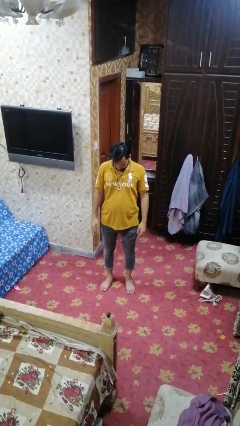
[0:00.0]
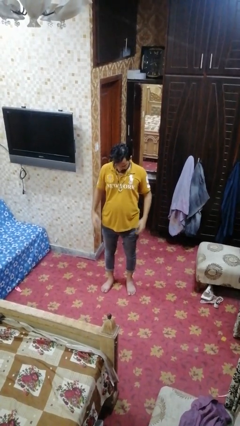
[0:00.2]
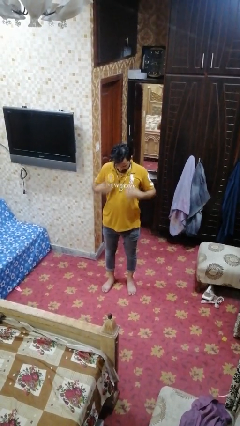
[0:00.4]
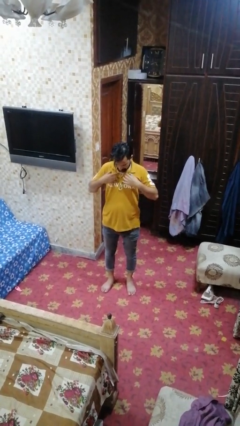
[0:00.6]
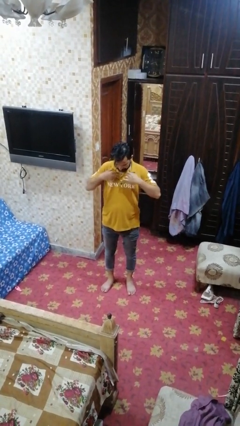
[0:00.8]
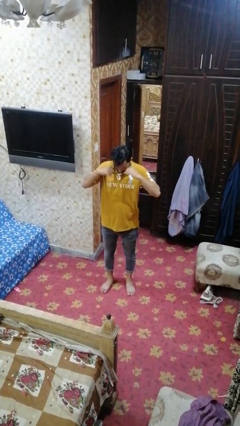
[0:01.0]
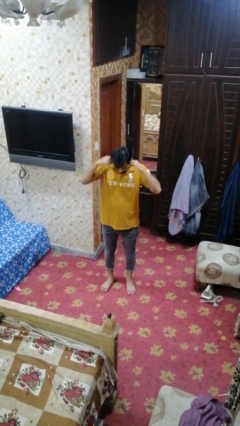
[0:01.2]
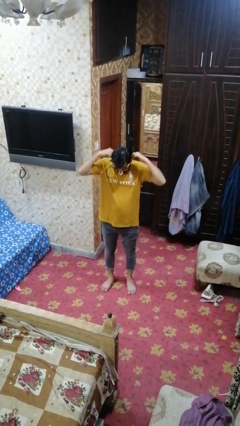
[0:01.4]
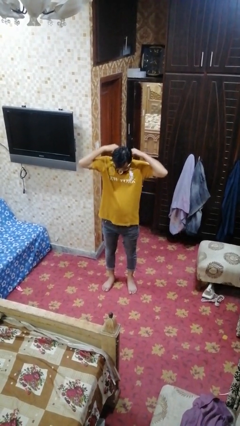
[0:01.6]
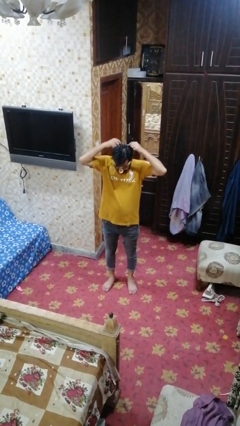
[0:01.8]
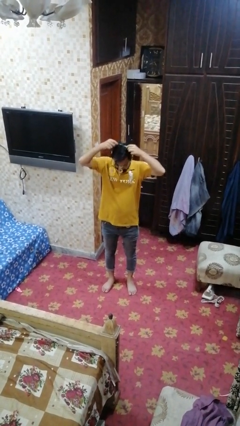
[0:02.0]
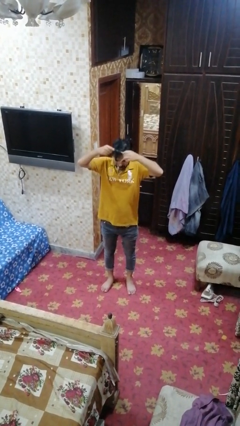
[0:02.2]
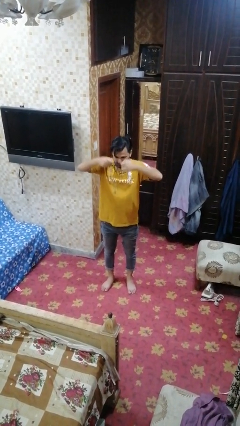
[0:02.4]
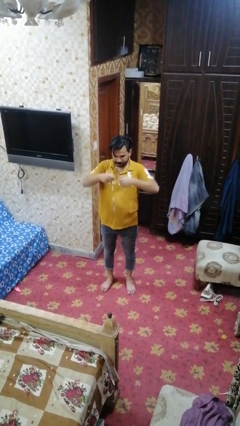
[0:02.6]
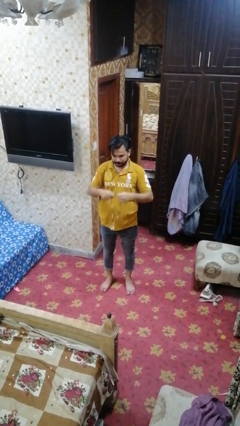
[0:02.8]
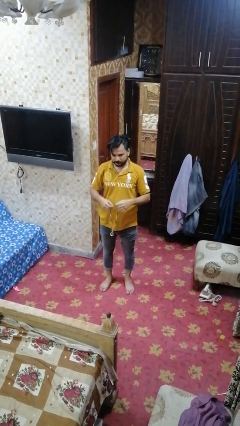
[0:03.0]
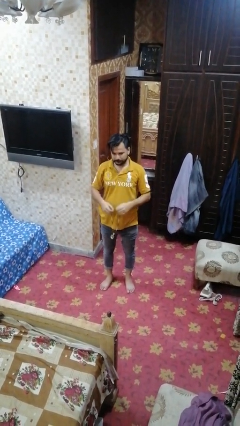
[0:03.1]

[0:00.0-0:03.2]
person takes off necklace

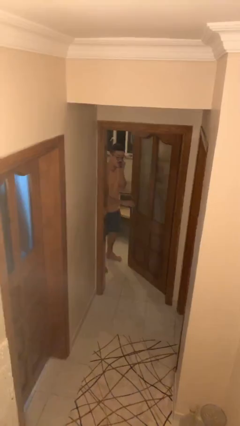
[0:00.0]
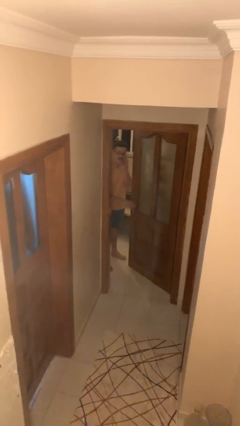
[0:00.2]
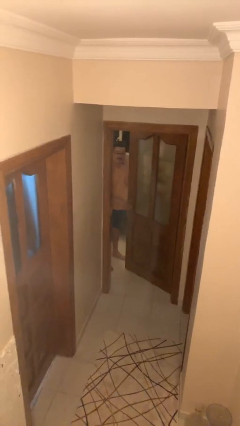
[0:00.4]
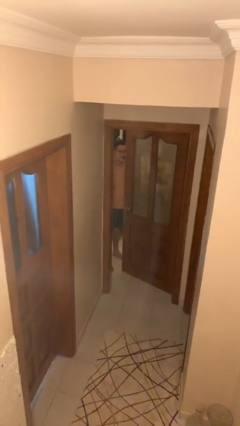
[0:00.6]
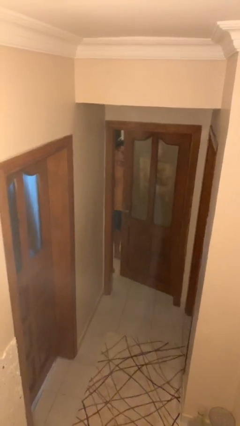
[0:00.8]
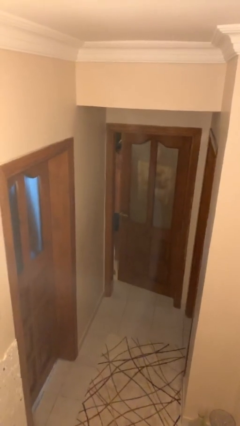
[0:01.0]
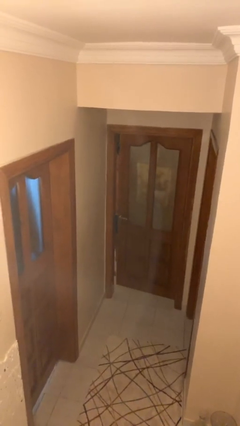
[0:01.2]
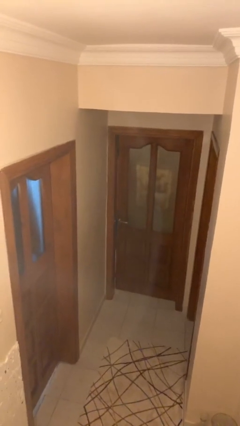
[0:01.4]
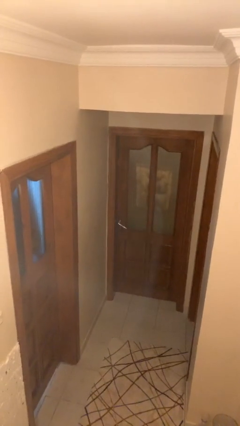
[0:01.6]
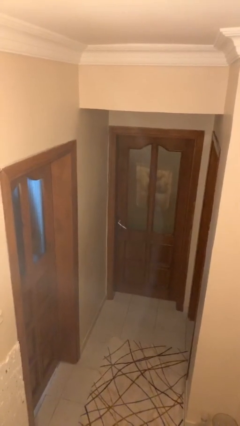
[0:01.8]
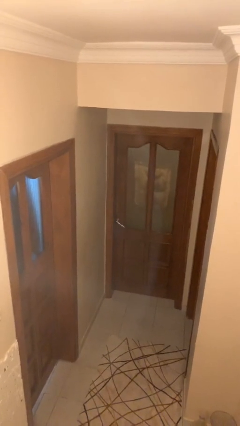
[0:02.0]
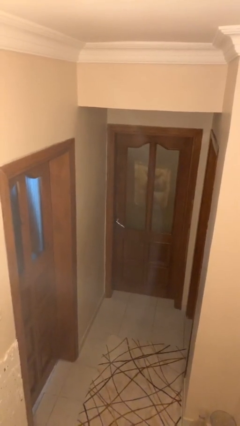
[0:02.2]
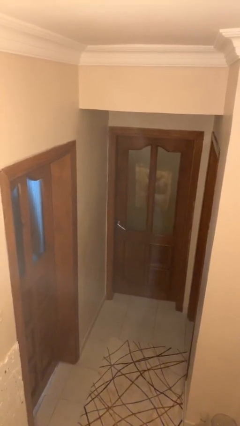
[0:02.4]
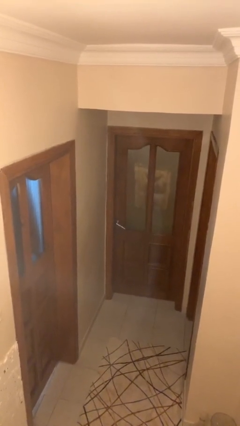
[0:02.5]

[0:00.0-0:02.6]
person closes facility door

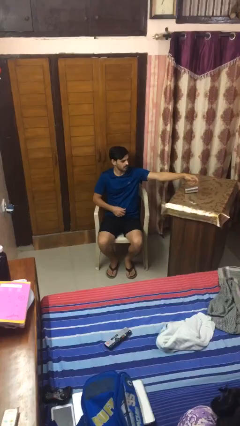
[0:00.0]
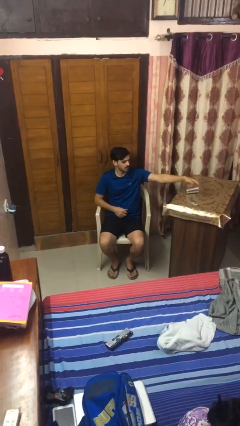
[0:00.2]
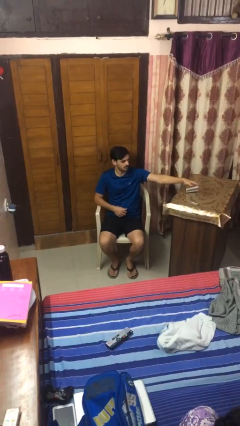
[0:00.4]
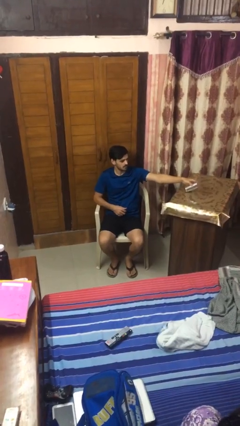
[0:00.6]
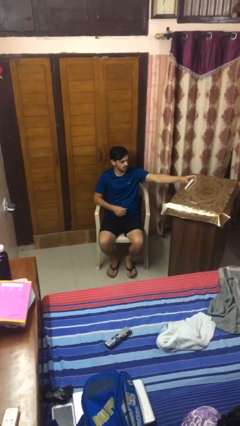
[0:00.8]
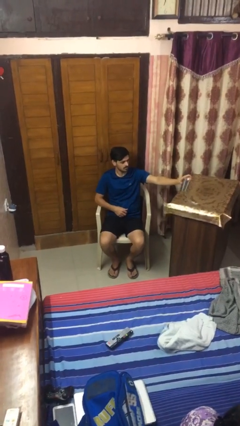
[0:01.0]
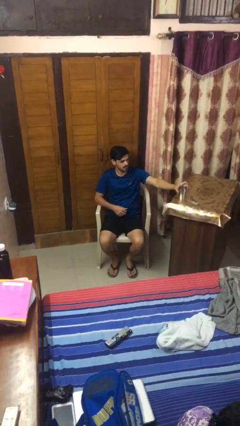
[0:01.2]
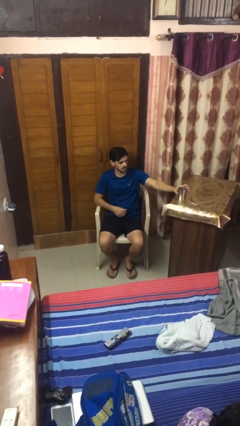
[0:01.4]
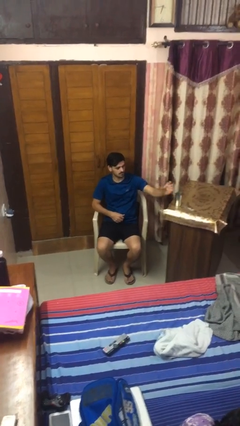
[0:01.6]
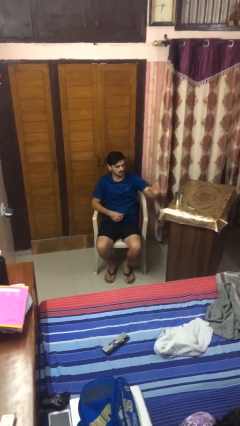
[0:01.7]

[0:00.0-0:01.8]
person sets upright glass

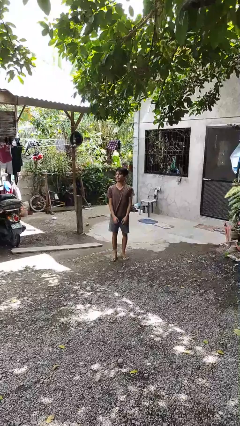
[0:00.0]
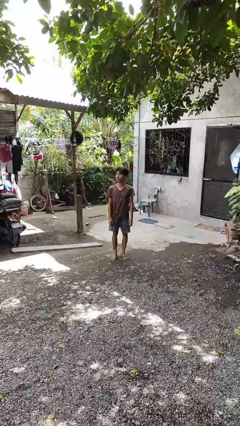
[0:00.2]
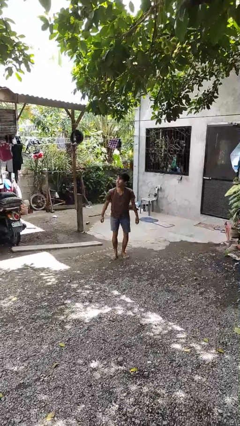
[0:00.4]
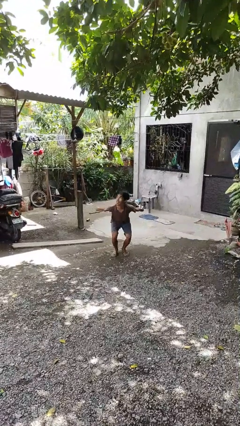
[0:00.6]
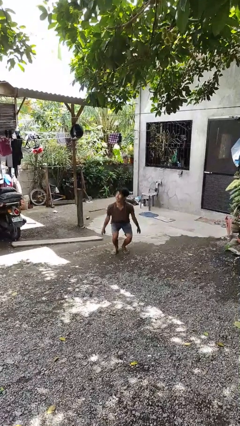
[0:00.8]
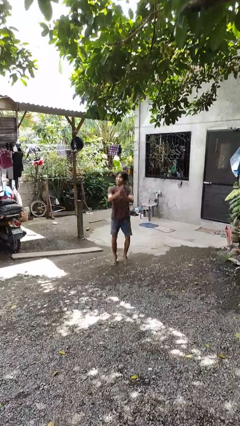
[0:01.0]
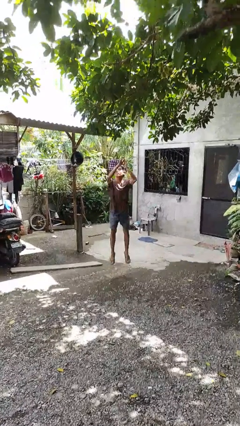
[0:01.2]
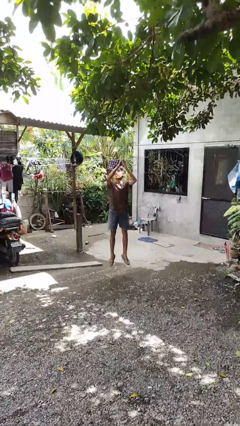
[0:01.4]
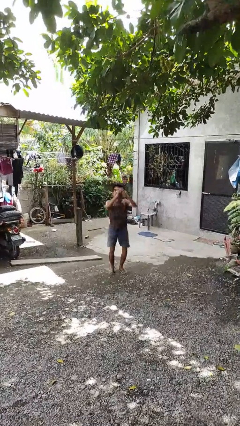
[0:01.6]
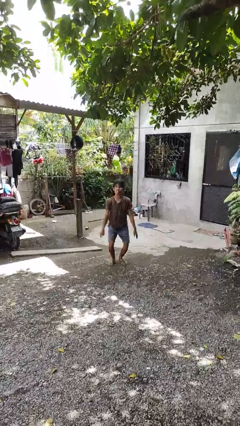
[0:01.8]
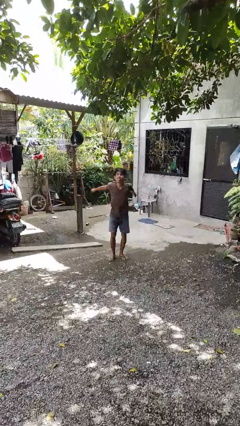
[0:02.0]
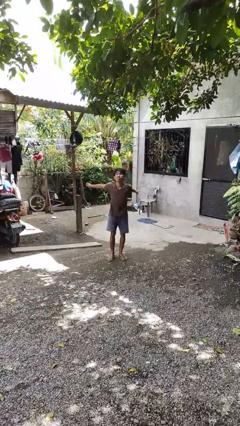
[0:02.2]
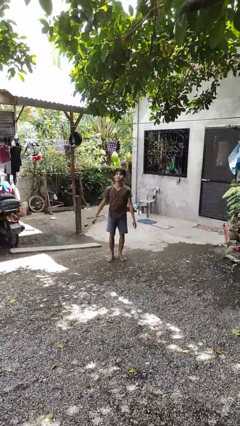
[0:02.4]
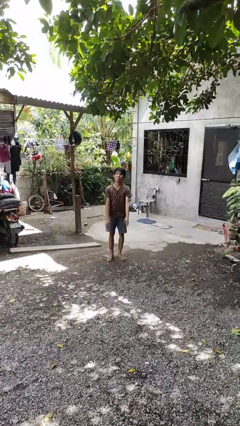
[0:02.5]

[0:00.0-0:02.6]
person jumps

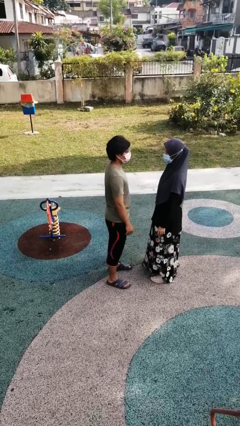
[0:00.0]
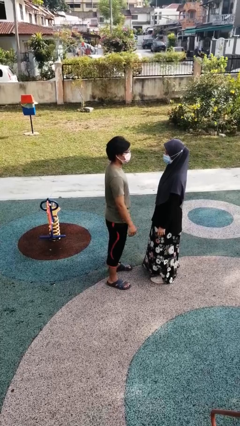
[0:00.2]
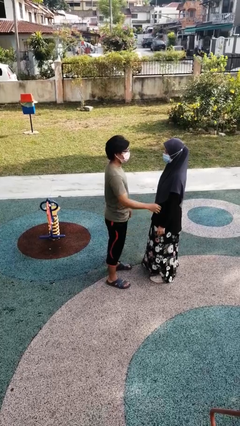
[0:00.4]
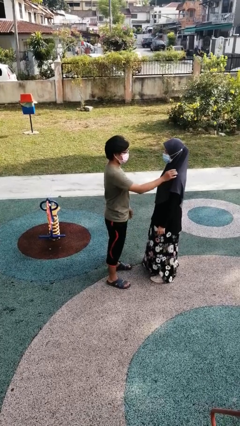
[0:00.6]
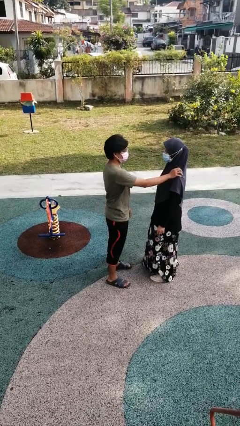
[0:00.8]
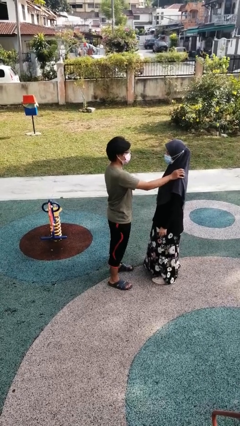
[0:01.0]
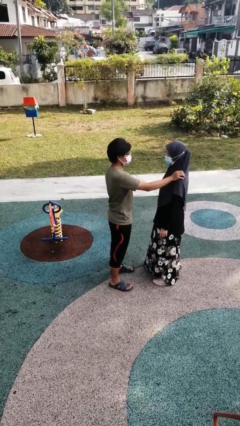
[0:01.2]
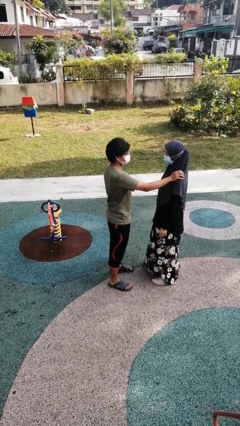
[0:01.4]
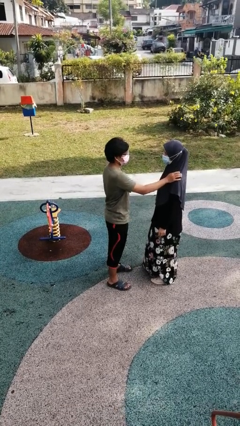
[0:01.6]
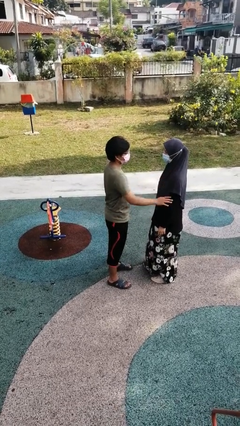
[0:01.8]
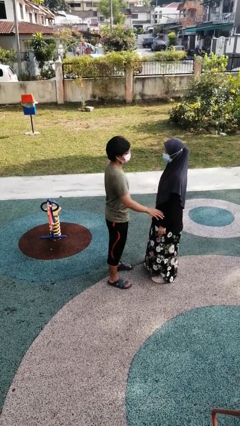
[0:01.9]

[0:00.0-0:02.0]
person pounds shoulders of person

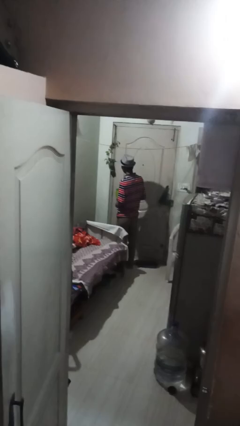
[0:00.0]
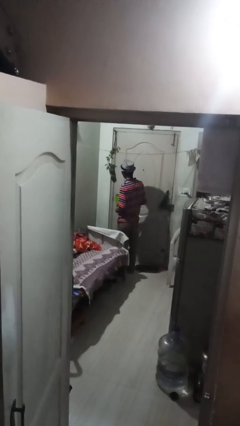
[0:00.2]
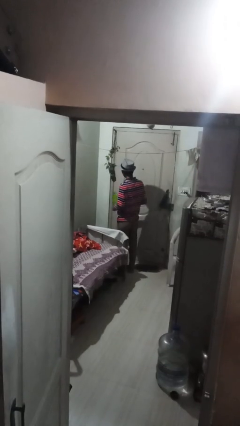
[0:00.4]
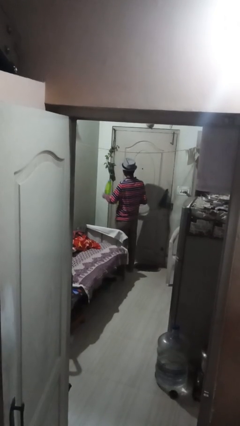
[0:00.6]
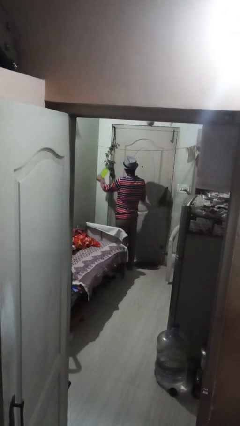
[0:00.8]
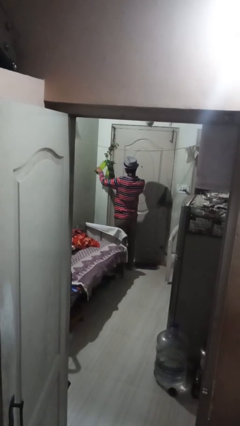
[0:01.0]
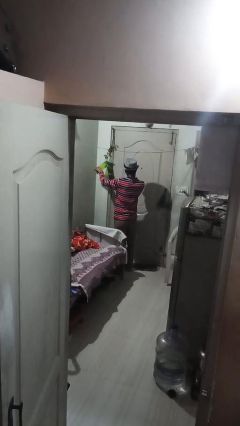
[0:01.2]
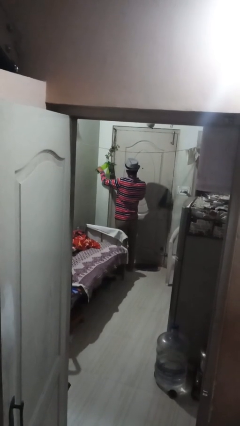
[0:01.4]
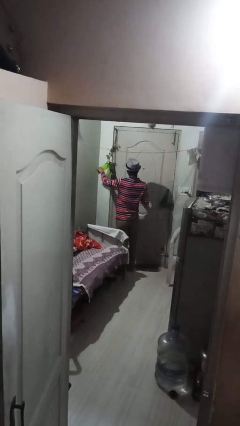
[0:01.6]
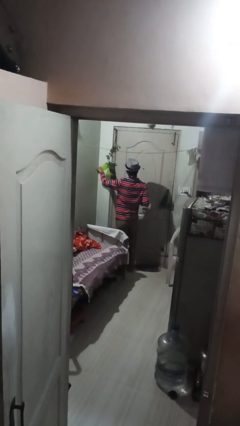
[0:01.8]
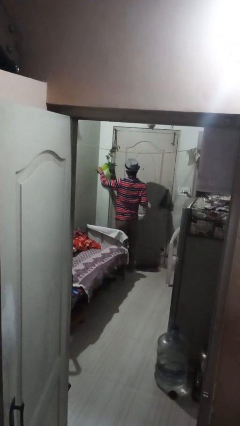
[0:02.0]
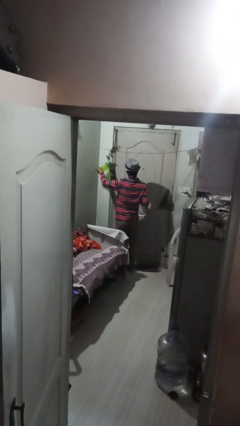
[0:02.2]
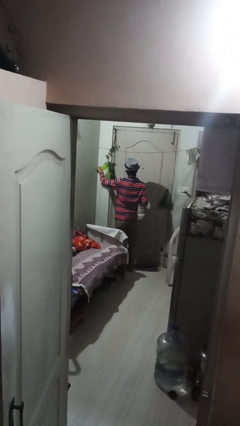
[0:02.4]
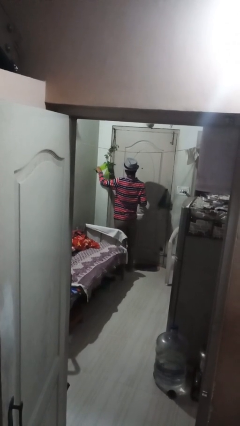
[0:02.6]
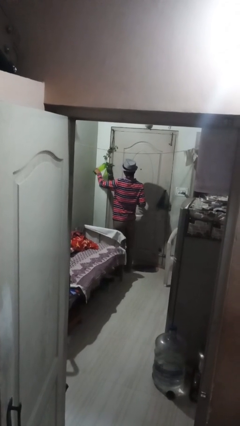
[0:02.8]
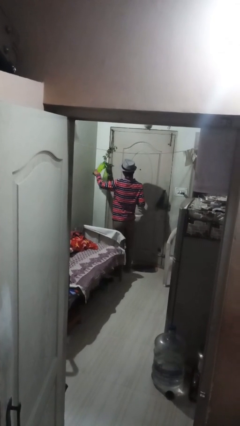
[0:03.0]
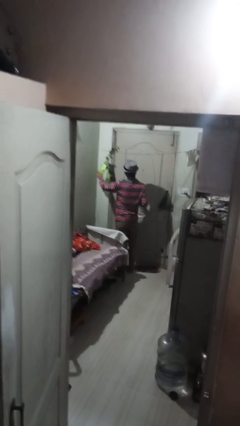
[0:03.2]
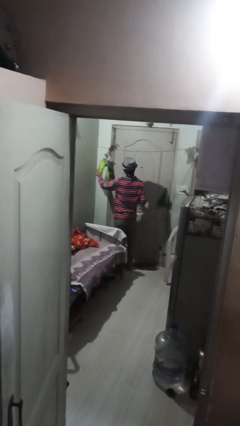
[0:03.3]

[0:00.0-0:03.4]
person waters houseplant

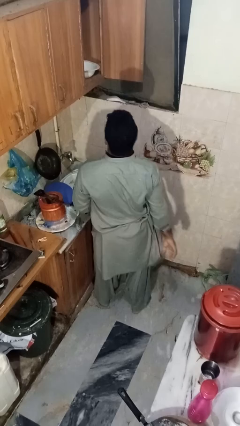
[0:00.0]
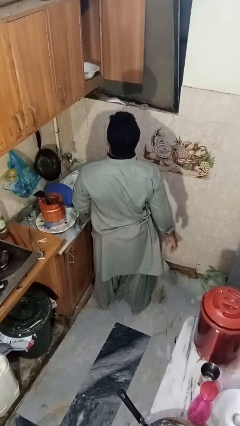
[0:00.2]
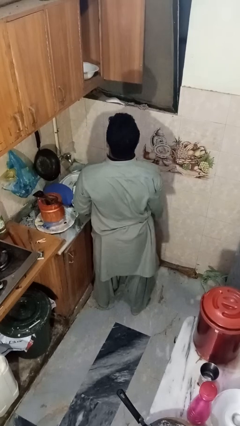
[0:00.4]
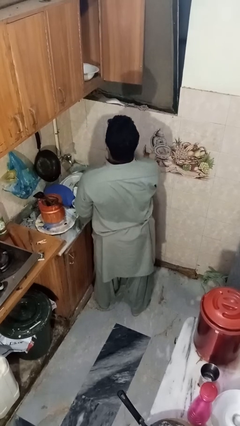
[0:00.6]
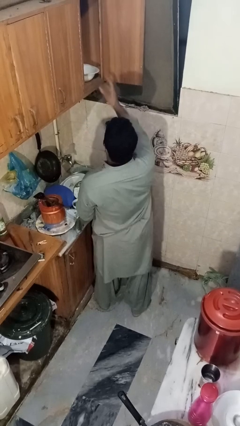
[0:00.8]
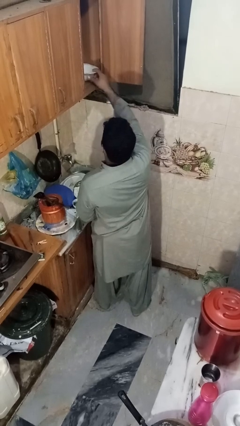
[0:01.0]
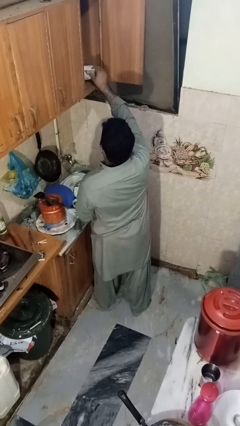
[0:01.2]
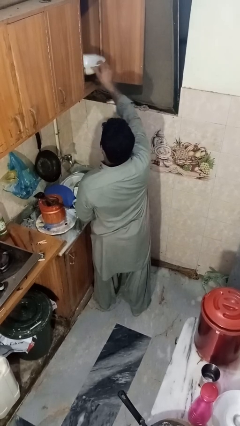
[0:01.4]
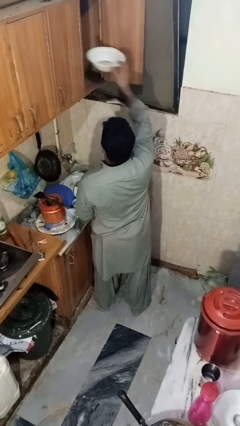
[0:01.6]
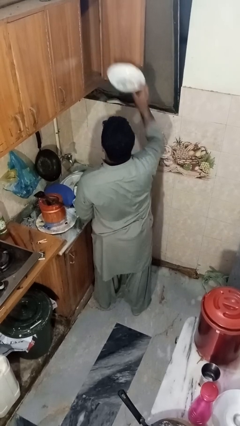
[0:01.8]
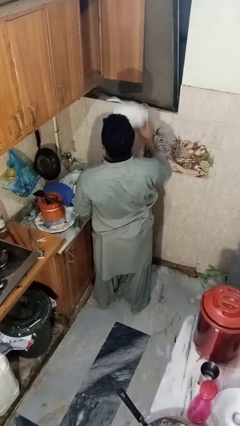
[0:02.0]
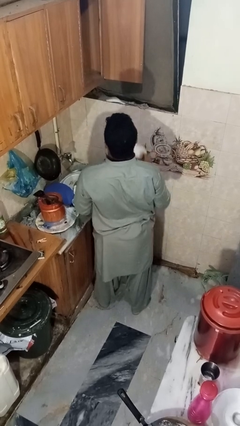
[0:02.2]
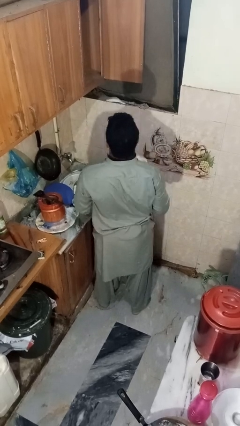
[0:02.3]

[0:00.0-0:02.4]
person takes object from cabinet
